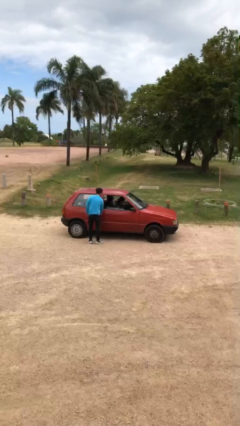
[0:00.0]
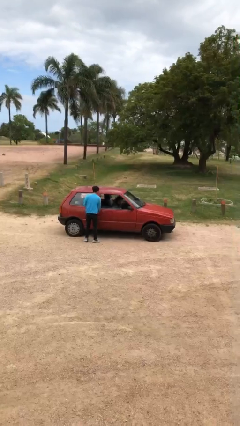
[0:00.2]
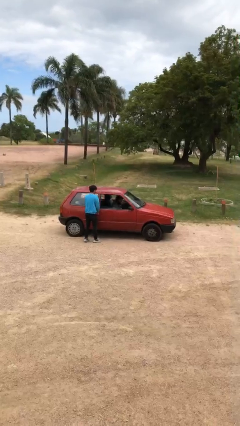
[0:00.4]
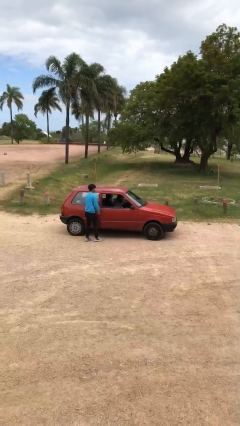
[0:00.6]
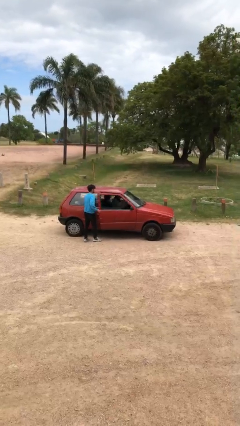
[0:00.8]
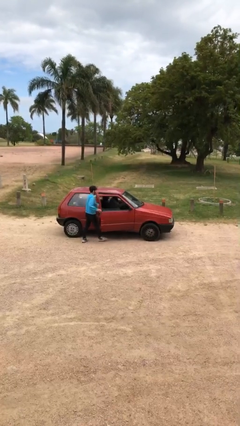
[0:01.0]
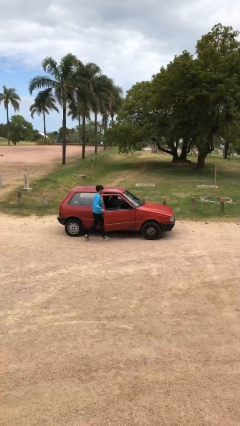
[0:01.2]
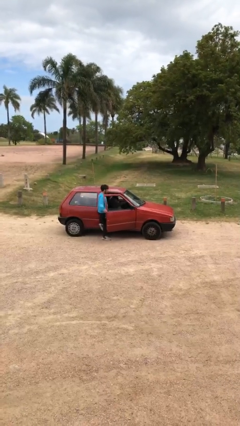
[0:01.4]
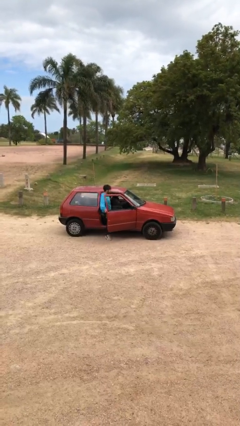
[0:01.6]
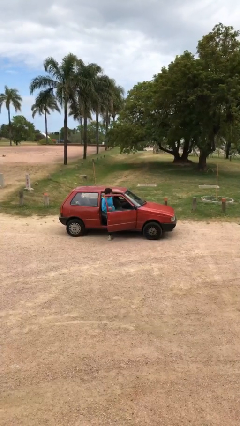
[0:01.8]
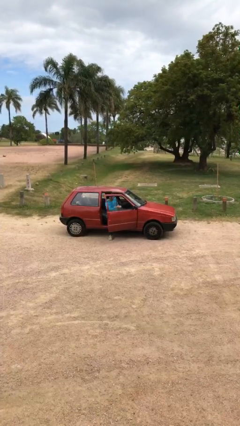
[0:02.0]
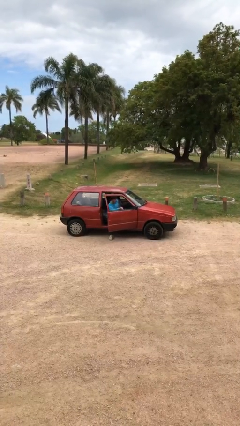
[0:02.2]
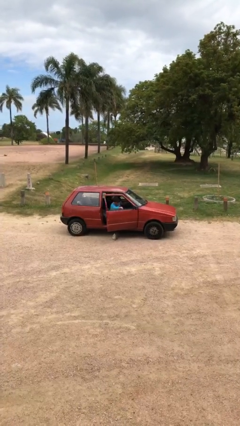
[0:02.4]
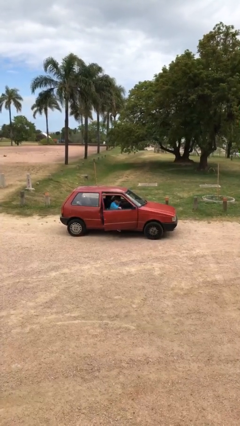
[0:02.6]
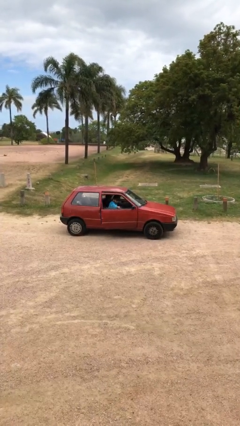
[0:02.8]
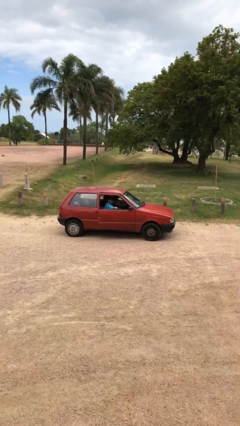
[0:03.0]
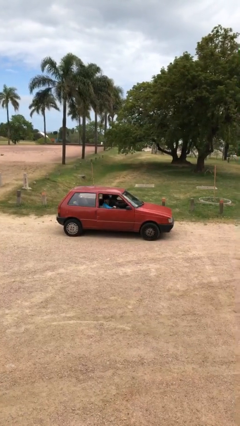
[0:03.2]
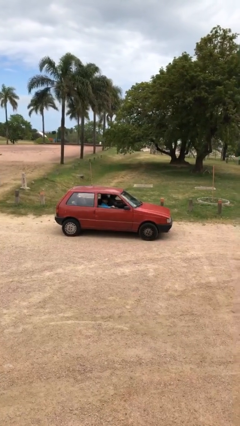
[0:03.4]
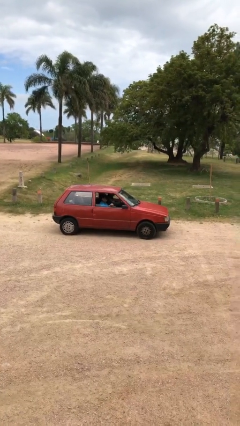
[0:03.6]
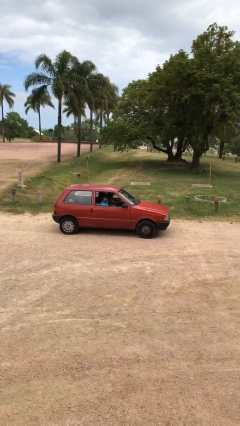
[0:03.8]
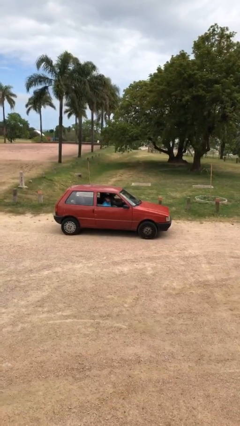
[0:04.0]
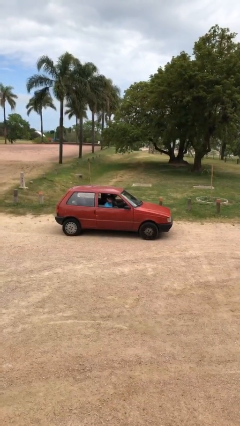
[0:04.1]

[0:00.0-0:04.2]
car picks up person

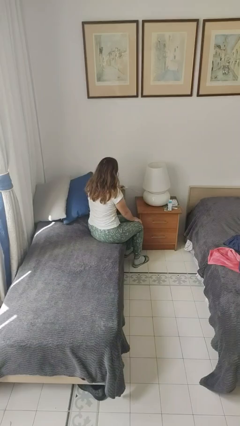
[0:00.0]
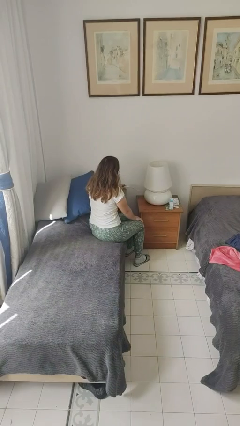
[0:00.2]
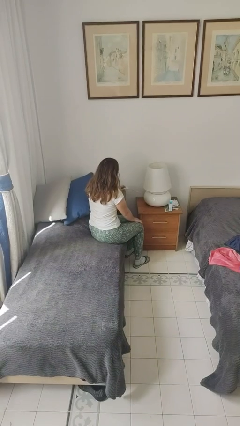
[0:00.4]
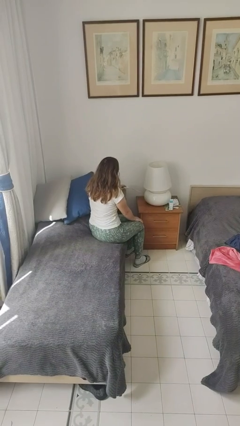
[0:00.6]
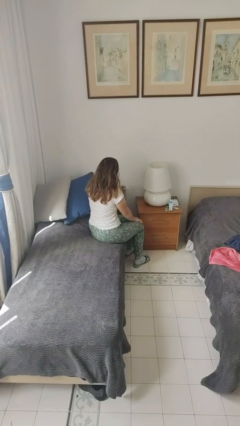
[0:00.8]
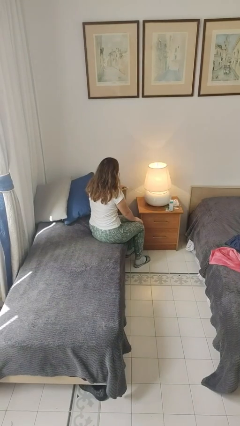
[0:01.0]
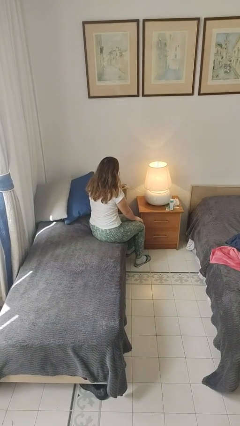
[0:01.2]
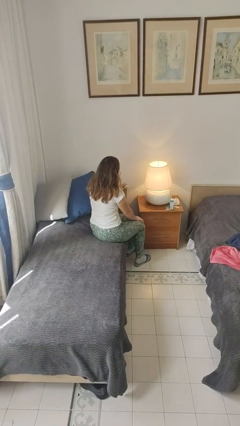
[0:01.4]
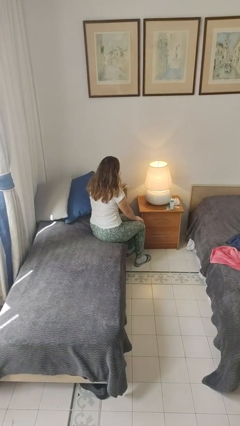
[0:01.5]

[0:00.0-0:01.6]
person turns on lamp

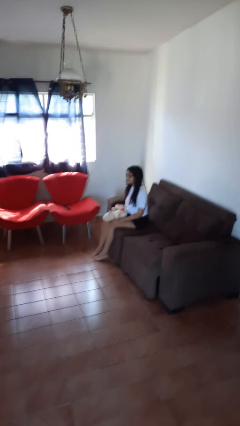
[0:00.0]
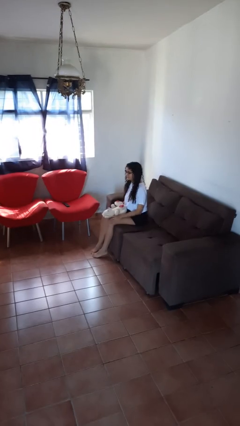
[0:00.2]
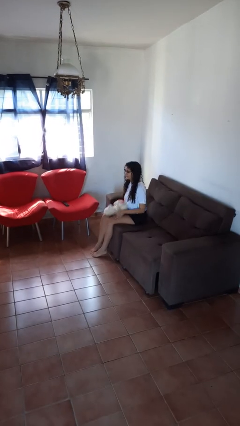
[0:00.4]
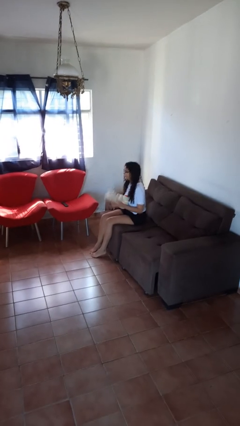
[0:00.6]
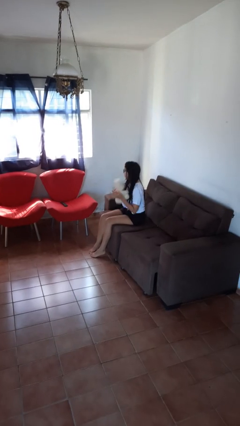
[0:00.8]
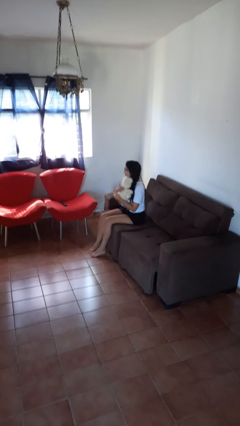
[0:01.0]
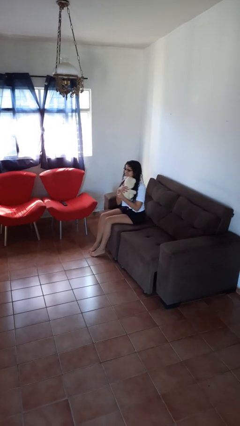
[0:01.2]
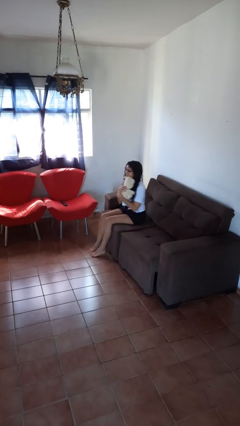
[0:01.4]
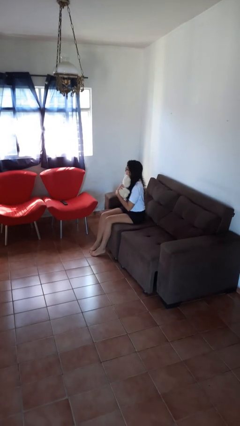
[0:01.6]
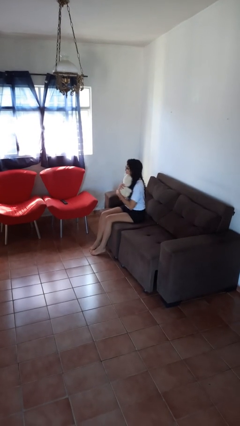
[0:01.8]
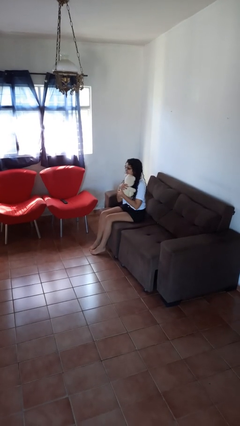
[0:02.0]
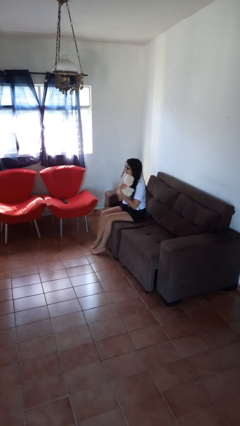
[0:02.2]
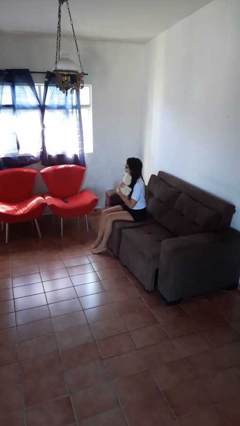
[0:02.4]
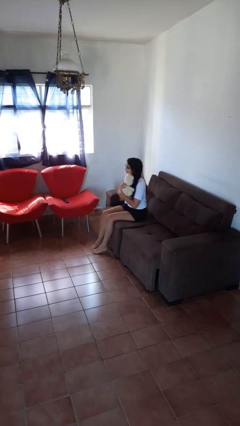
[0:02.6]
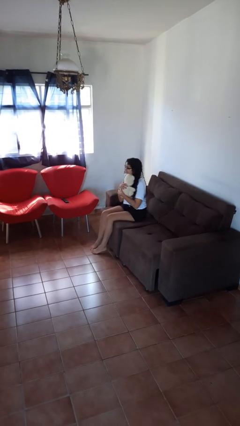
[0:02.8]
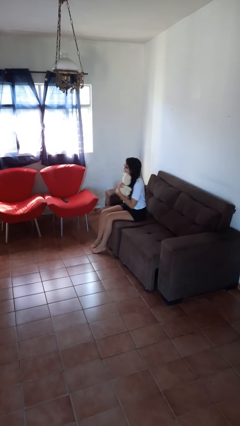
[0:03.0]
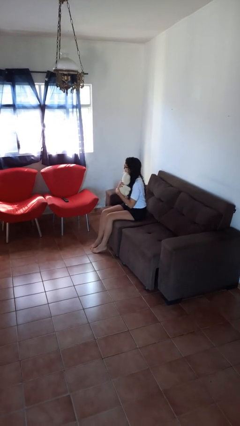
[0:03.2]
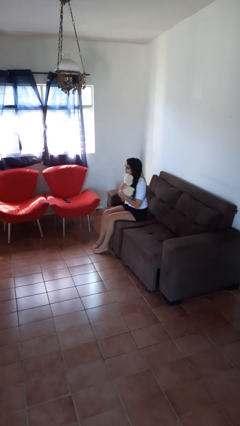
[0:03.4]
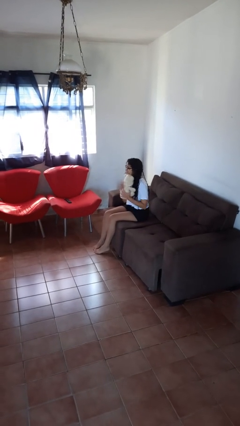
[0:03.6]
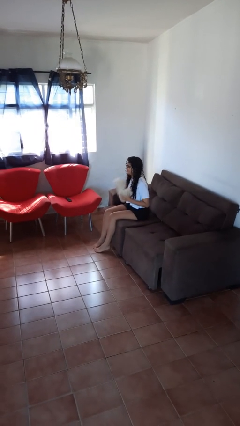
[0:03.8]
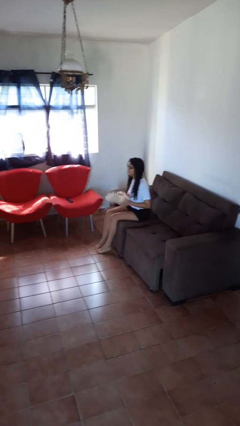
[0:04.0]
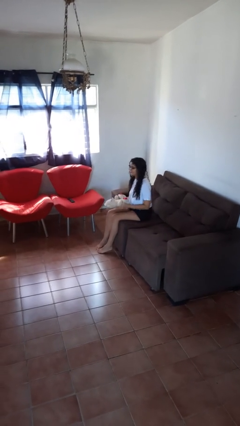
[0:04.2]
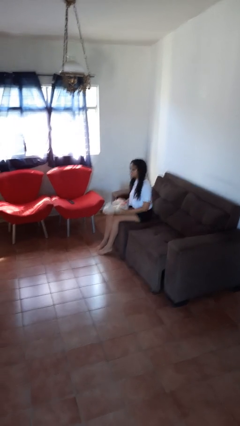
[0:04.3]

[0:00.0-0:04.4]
person hugs stuffed animal

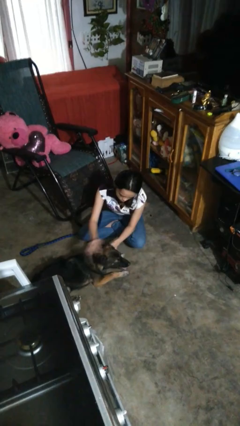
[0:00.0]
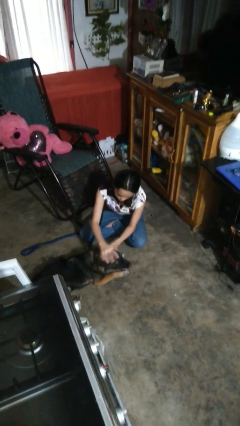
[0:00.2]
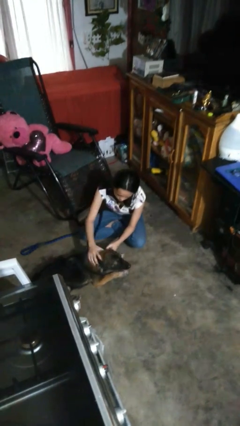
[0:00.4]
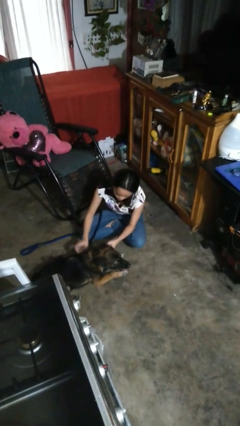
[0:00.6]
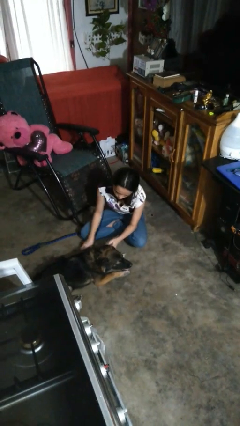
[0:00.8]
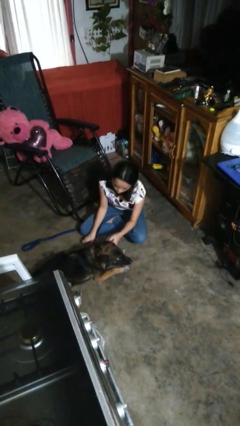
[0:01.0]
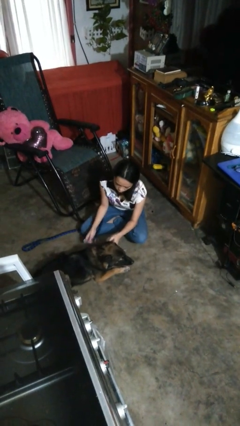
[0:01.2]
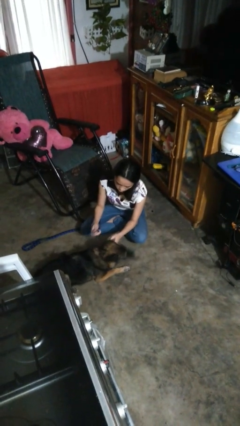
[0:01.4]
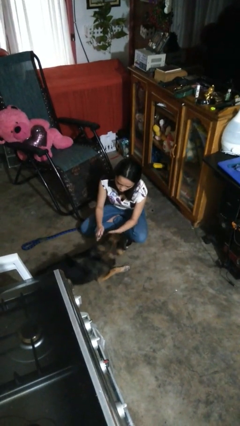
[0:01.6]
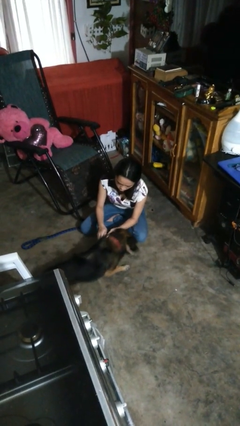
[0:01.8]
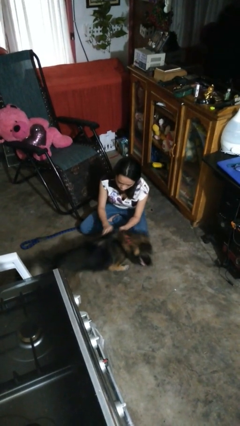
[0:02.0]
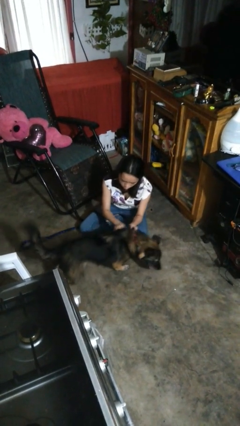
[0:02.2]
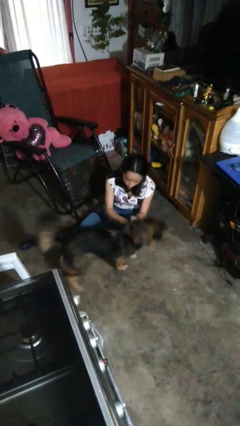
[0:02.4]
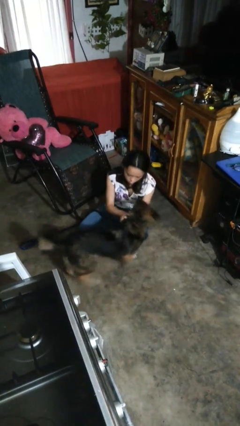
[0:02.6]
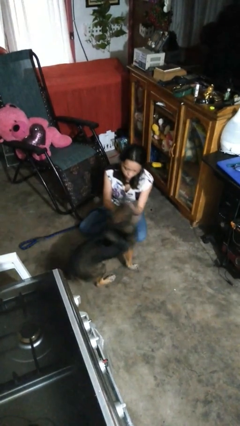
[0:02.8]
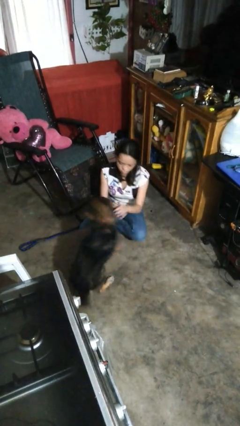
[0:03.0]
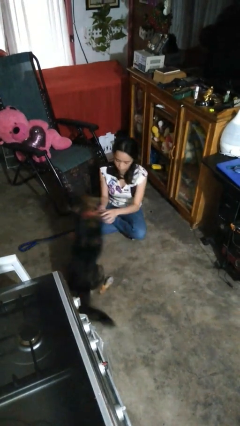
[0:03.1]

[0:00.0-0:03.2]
person attaches leash to dog

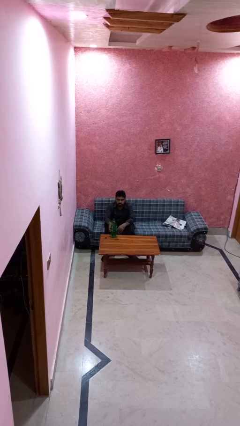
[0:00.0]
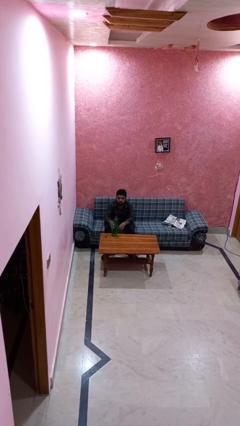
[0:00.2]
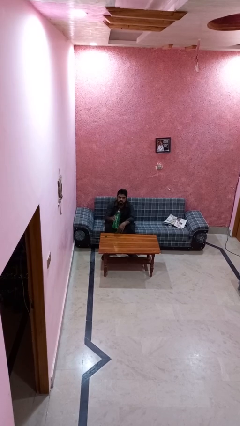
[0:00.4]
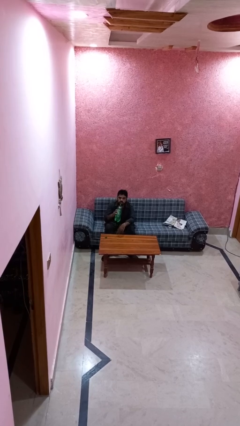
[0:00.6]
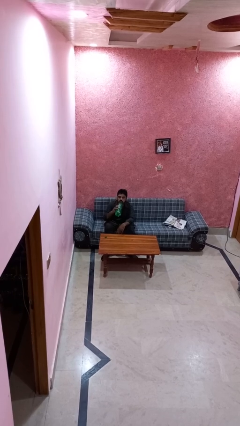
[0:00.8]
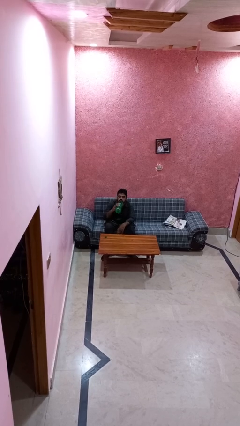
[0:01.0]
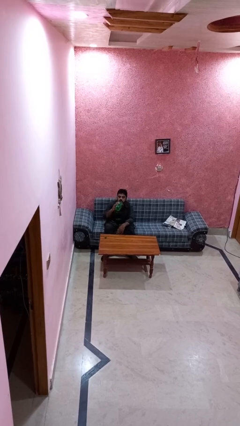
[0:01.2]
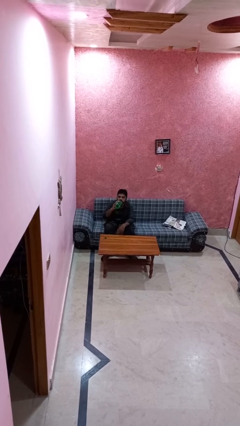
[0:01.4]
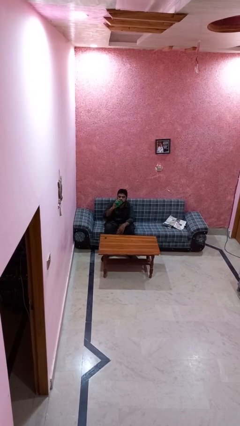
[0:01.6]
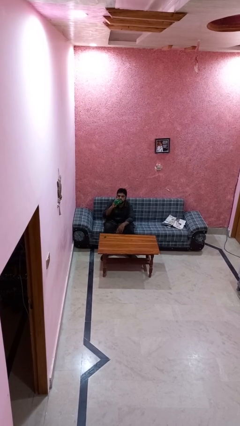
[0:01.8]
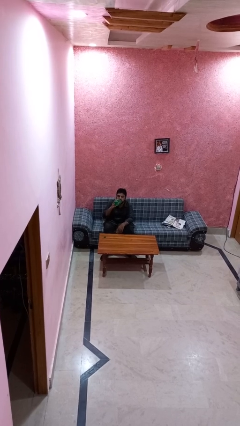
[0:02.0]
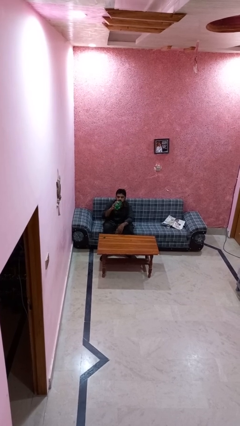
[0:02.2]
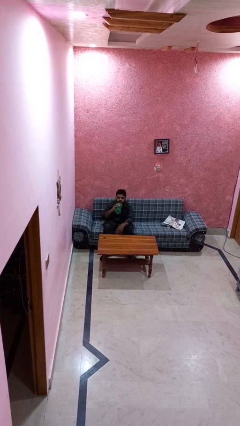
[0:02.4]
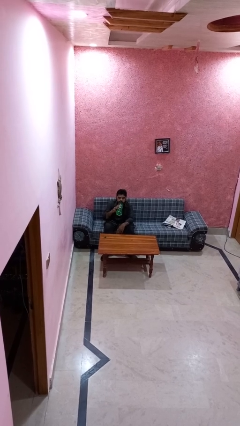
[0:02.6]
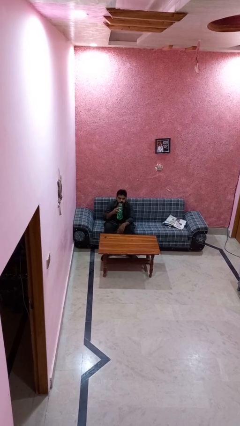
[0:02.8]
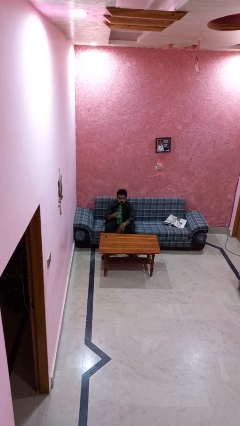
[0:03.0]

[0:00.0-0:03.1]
person drinks from bottle

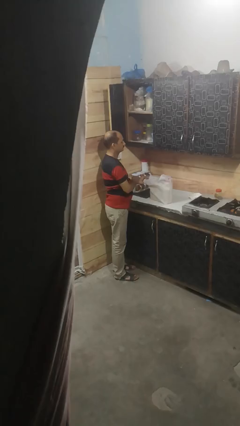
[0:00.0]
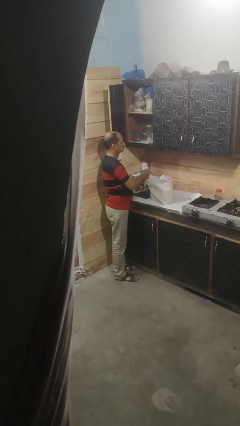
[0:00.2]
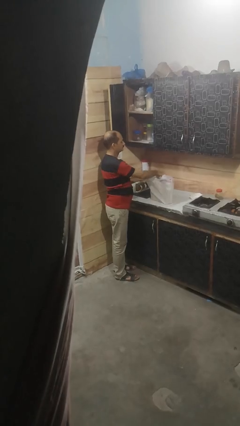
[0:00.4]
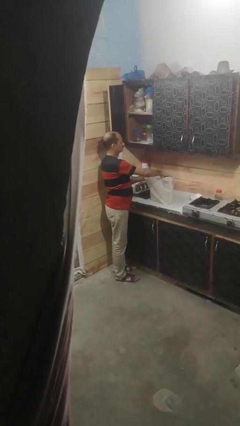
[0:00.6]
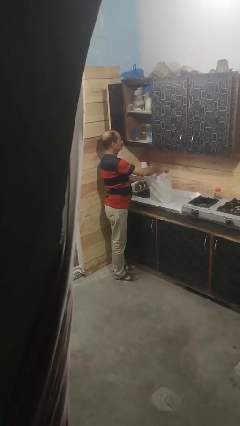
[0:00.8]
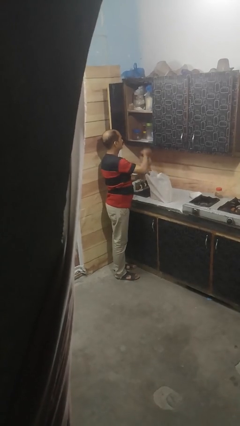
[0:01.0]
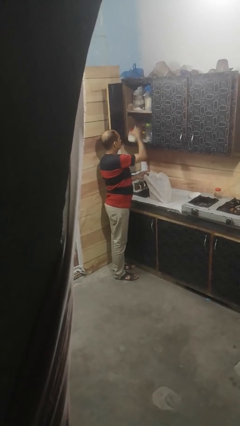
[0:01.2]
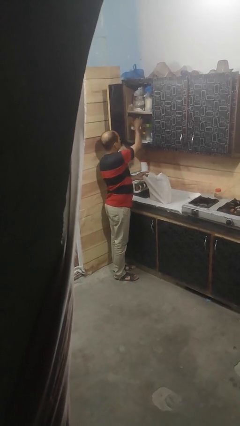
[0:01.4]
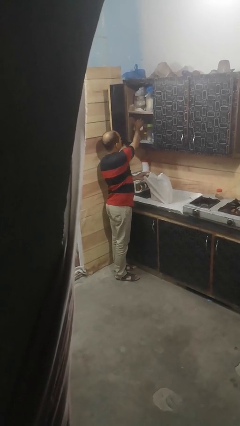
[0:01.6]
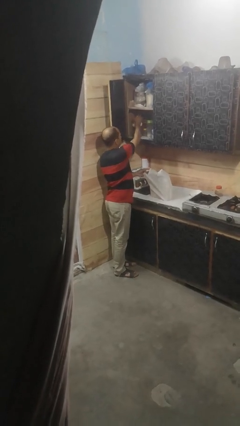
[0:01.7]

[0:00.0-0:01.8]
person loads groceries into cabinet
